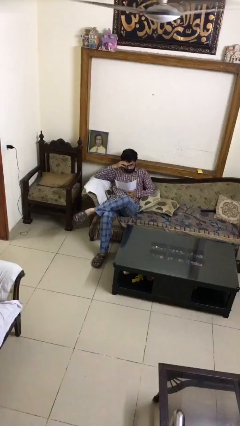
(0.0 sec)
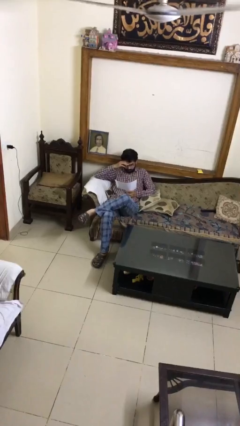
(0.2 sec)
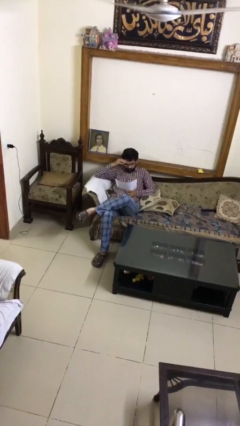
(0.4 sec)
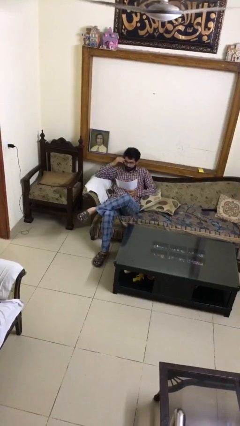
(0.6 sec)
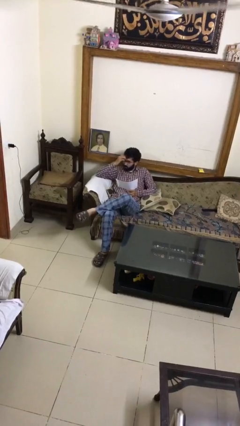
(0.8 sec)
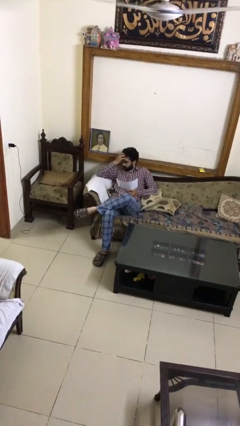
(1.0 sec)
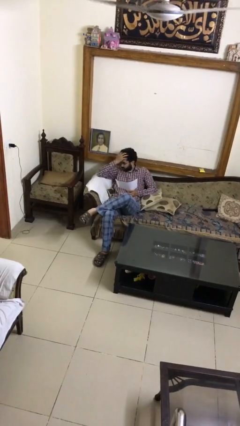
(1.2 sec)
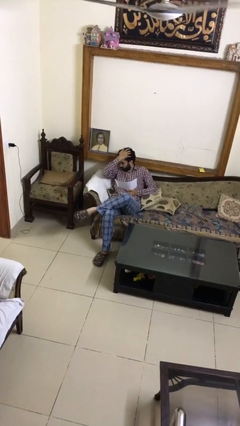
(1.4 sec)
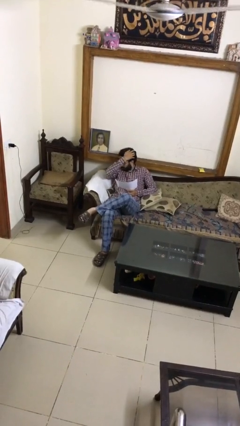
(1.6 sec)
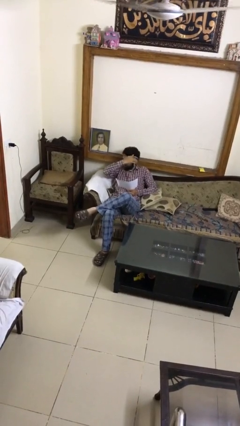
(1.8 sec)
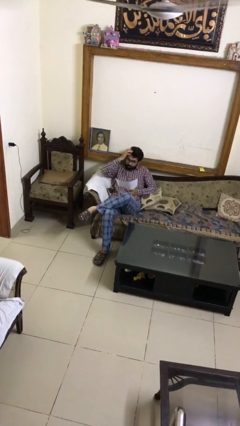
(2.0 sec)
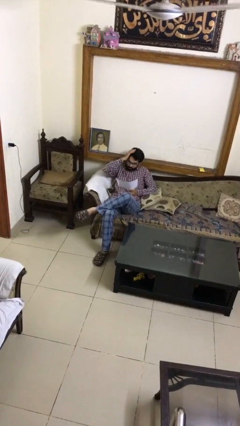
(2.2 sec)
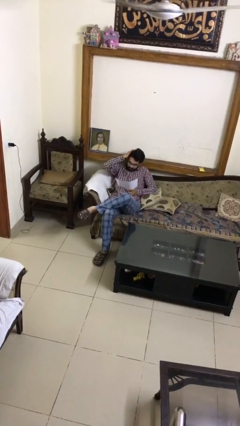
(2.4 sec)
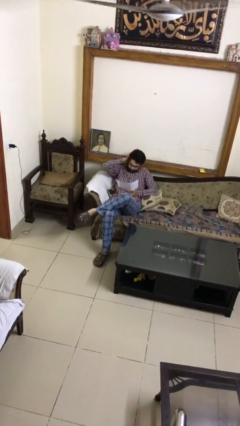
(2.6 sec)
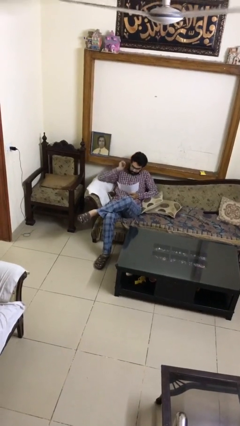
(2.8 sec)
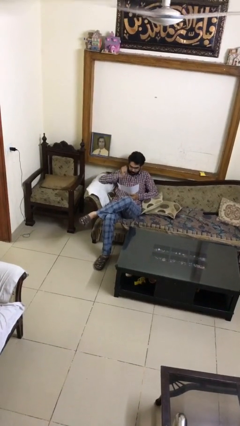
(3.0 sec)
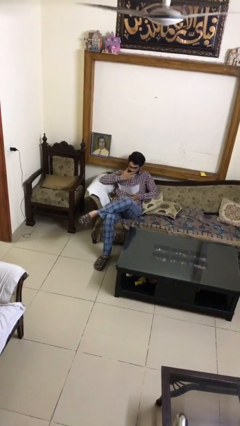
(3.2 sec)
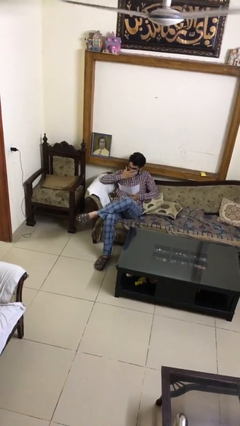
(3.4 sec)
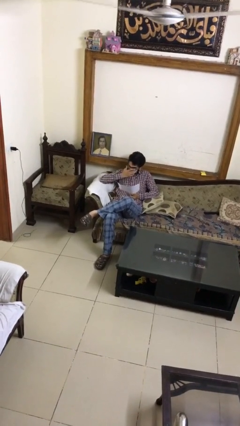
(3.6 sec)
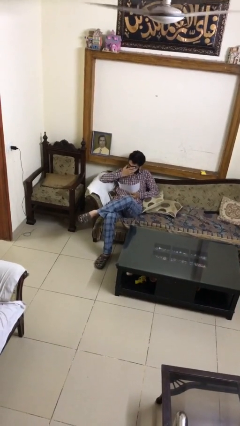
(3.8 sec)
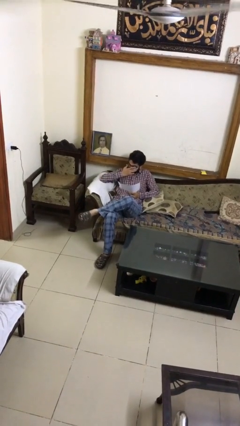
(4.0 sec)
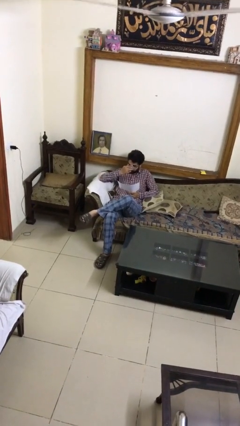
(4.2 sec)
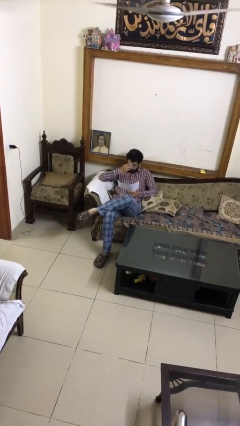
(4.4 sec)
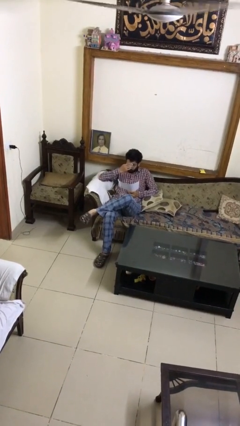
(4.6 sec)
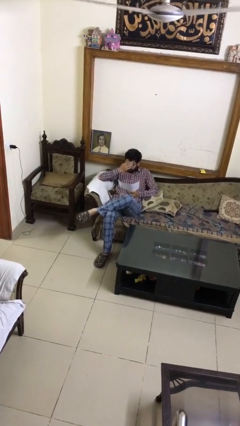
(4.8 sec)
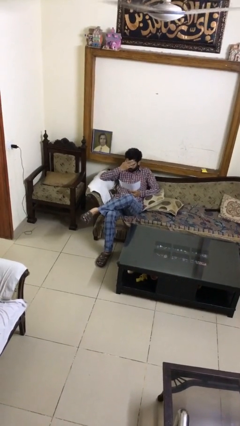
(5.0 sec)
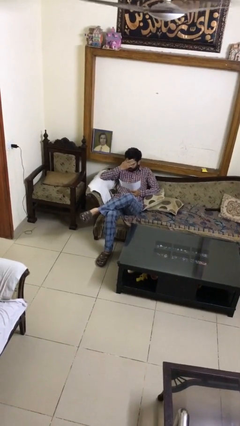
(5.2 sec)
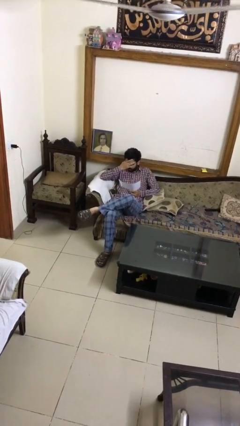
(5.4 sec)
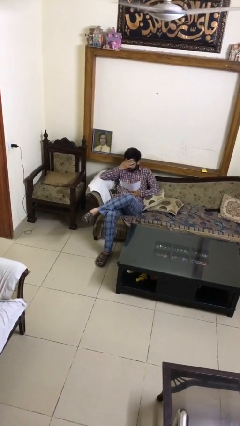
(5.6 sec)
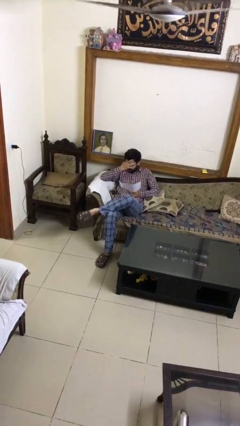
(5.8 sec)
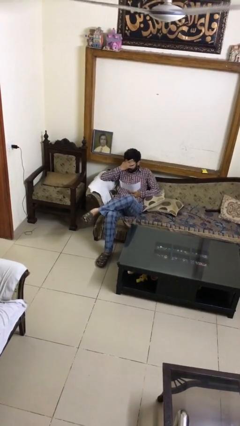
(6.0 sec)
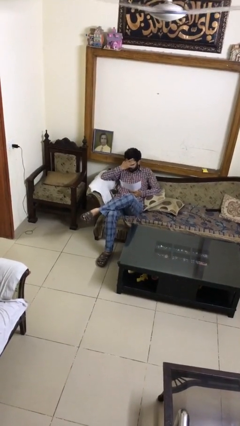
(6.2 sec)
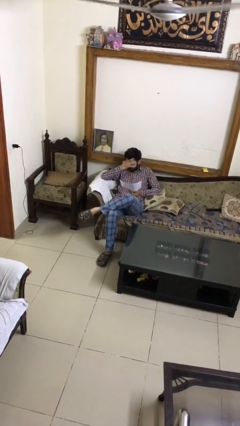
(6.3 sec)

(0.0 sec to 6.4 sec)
person reads document

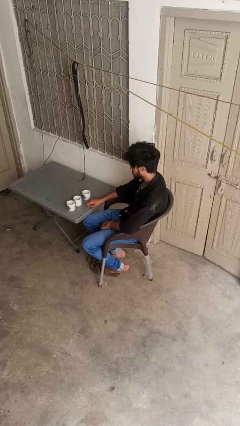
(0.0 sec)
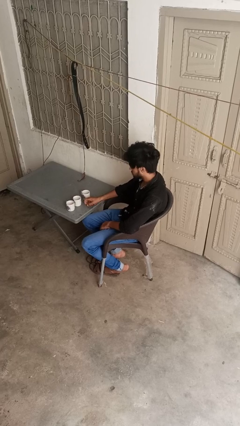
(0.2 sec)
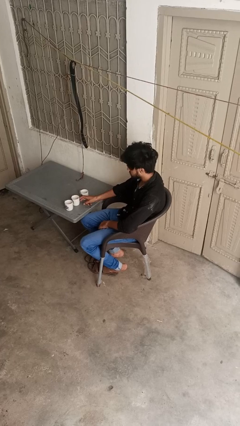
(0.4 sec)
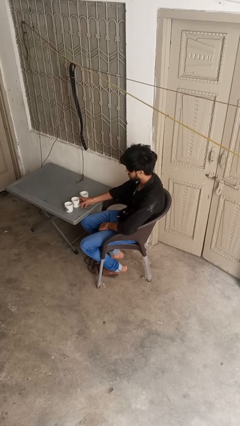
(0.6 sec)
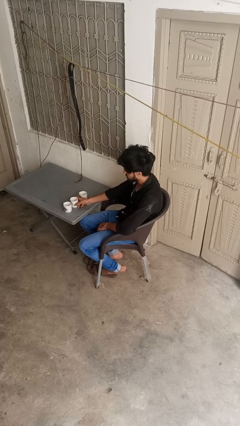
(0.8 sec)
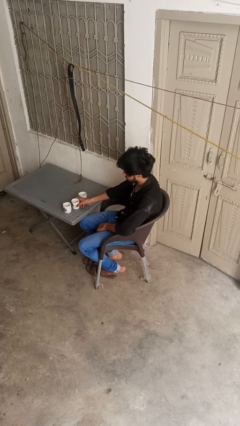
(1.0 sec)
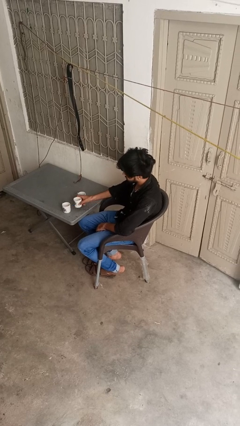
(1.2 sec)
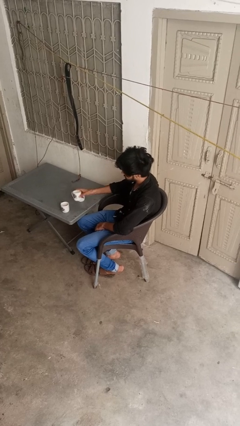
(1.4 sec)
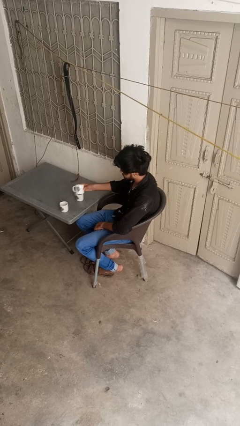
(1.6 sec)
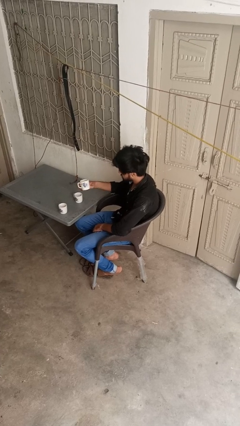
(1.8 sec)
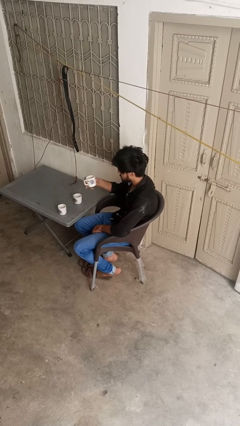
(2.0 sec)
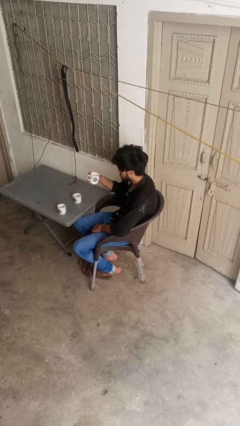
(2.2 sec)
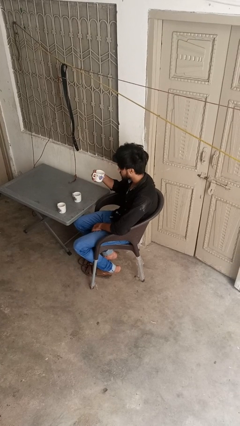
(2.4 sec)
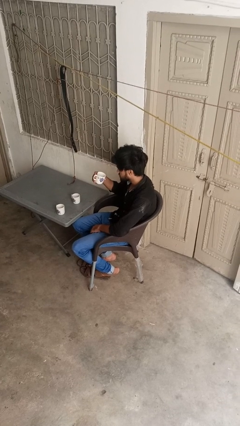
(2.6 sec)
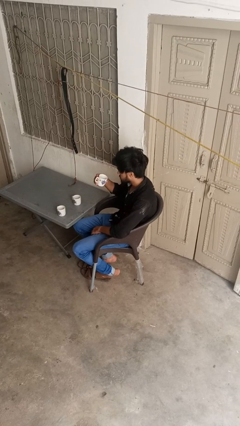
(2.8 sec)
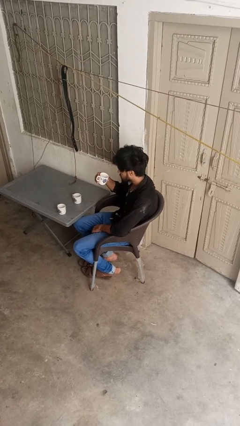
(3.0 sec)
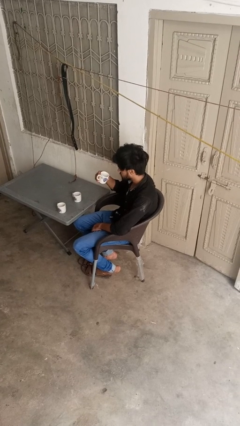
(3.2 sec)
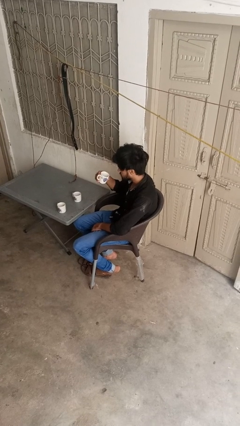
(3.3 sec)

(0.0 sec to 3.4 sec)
person picks up object from table

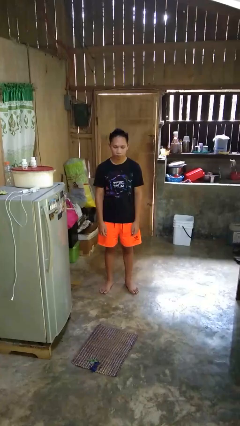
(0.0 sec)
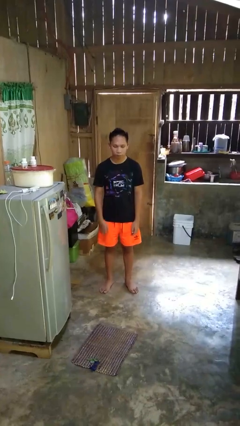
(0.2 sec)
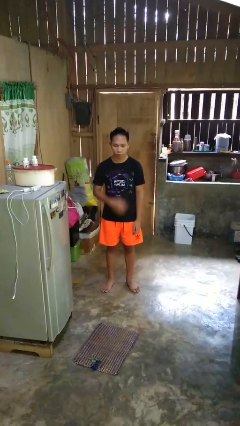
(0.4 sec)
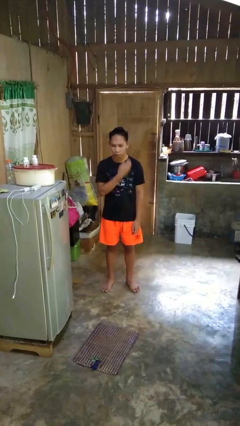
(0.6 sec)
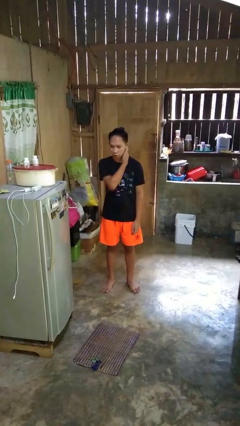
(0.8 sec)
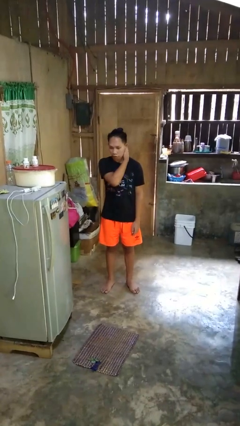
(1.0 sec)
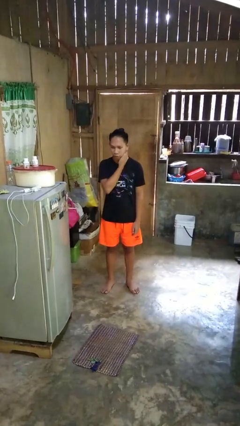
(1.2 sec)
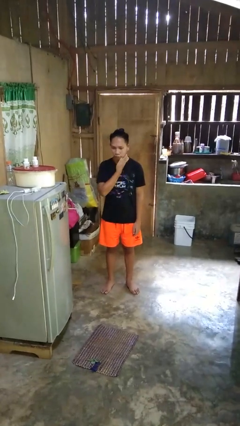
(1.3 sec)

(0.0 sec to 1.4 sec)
person rubs neck

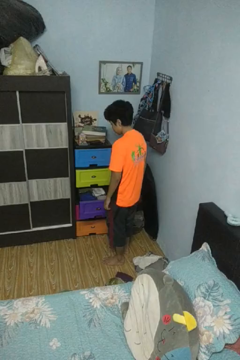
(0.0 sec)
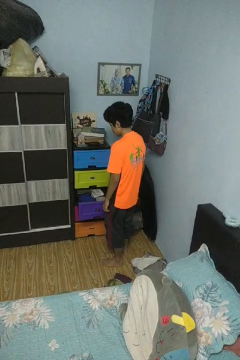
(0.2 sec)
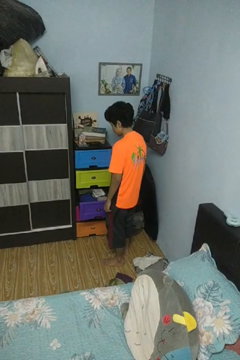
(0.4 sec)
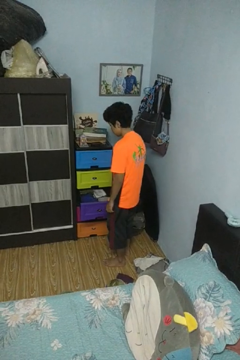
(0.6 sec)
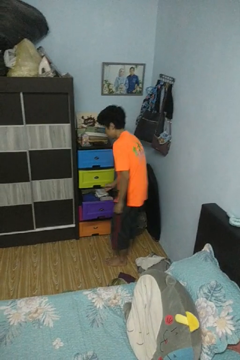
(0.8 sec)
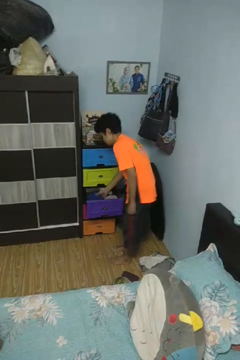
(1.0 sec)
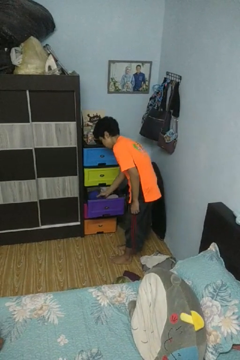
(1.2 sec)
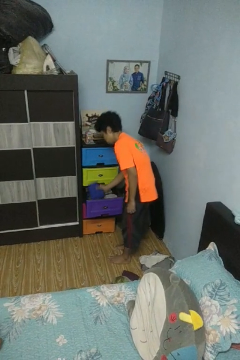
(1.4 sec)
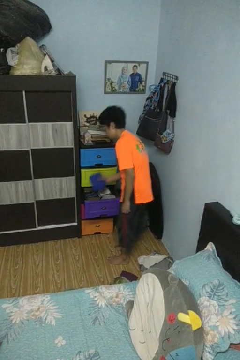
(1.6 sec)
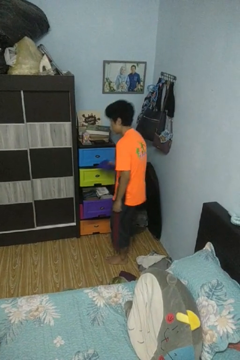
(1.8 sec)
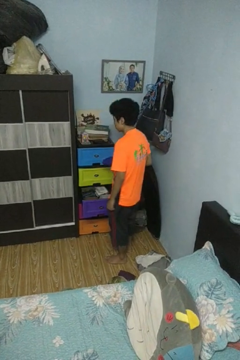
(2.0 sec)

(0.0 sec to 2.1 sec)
person takes clothes from dresser

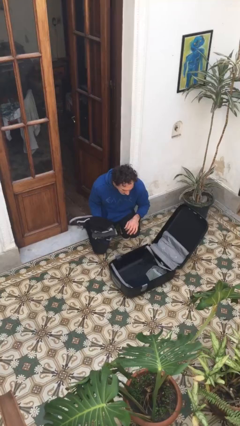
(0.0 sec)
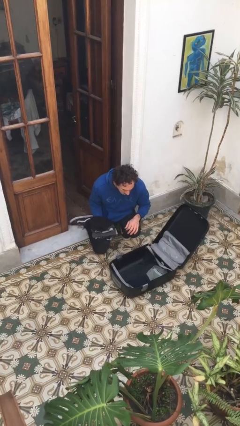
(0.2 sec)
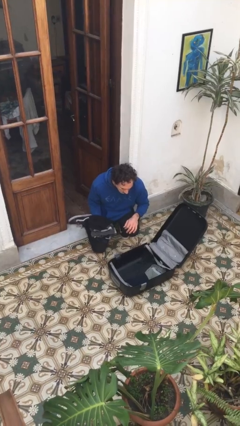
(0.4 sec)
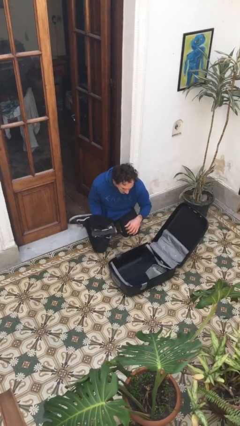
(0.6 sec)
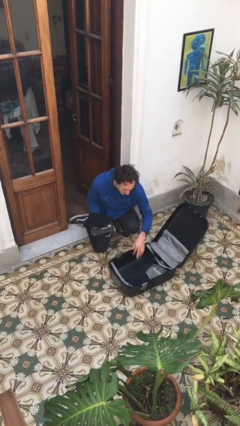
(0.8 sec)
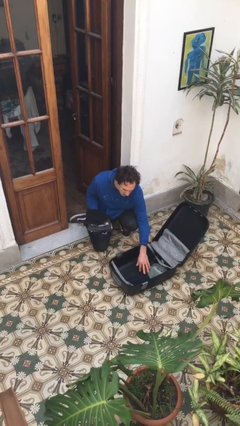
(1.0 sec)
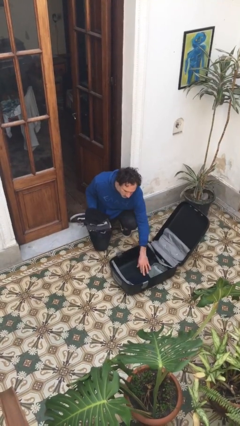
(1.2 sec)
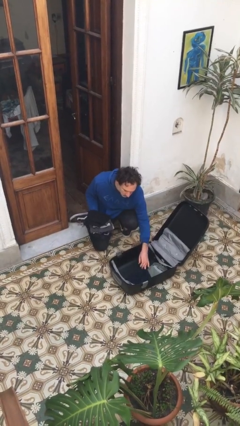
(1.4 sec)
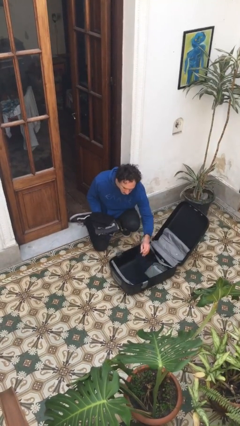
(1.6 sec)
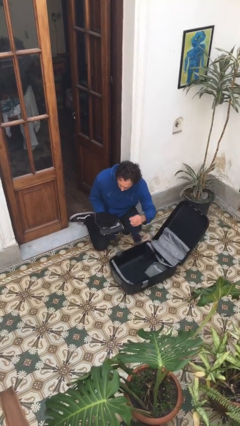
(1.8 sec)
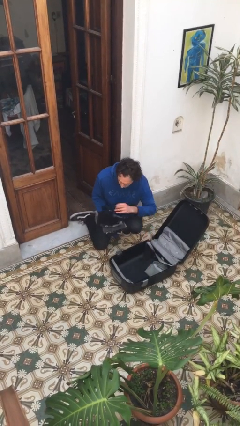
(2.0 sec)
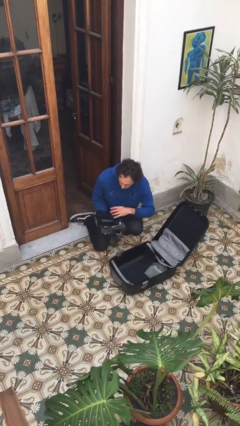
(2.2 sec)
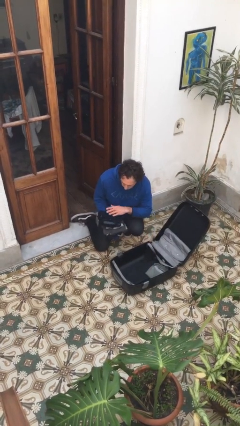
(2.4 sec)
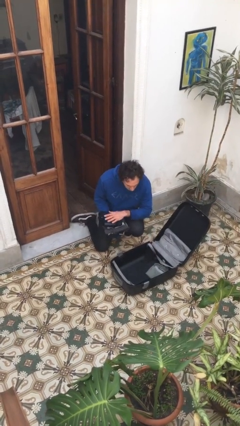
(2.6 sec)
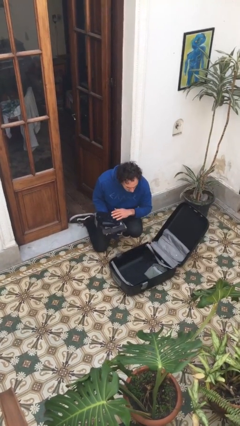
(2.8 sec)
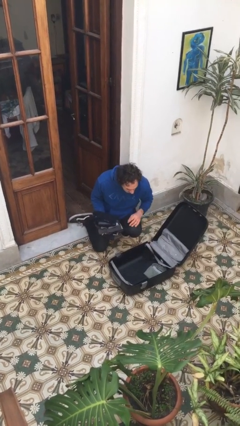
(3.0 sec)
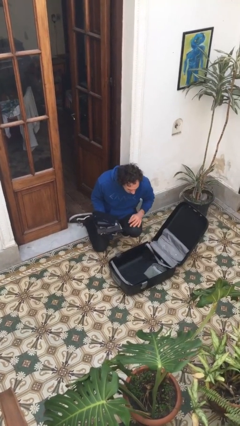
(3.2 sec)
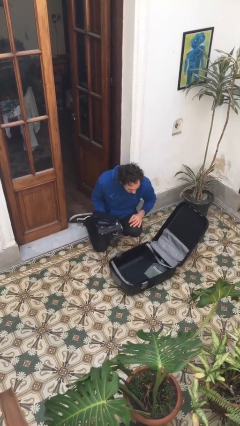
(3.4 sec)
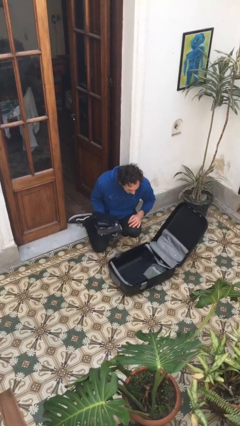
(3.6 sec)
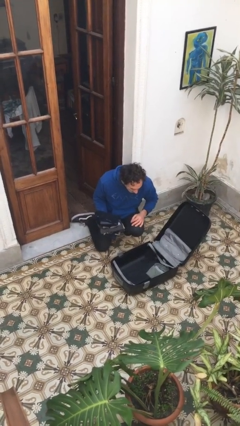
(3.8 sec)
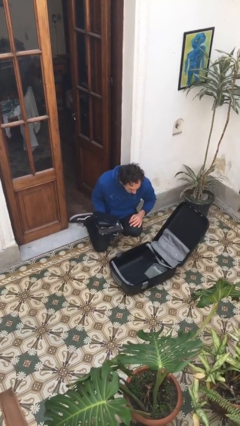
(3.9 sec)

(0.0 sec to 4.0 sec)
person unloads clothes from suitcase

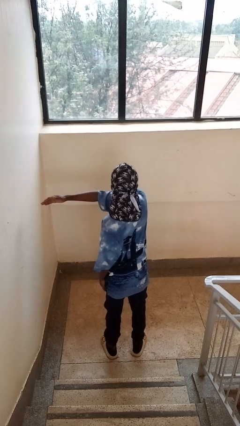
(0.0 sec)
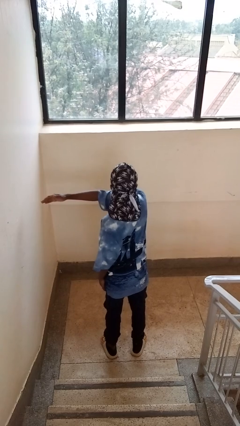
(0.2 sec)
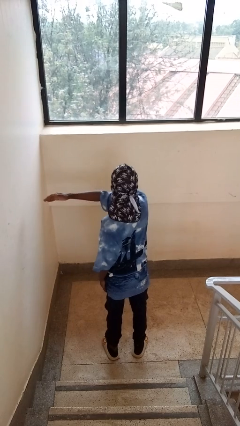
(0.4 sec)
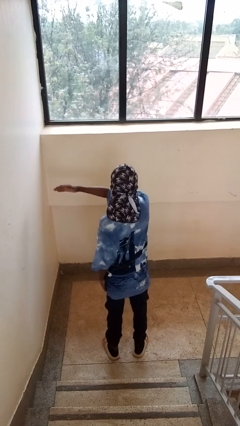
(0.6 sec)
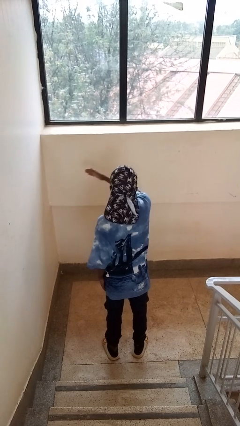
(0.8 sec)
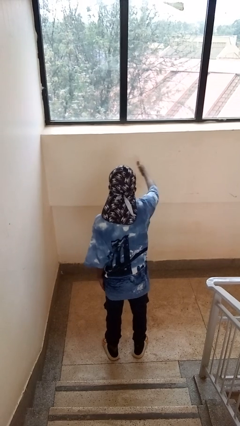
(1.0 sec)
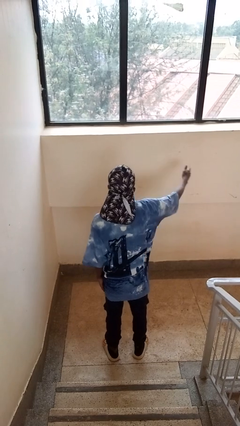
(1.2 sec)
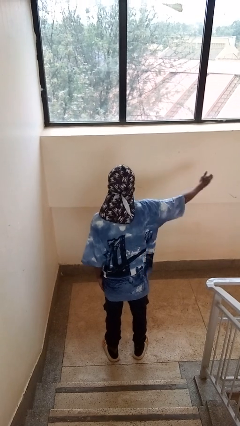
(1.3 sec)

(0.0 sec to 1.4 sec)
person gestures swipe right
